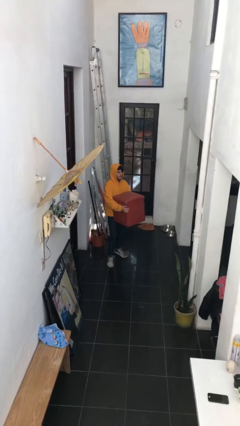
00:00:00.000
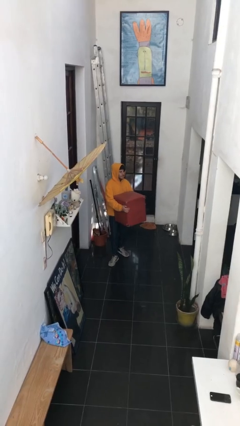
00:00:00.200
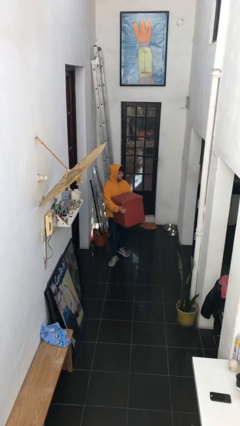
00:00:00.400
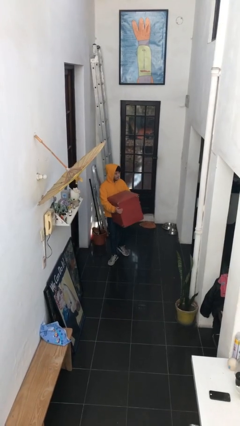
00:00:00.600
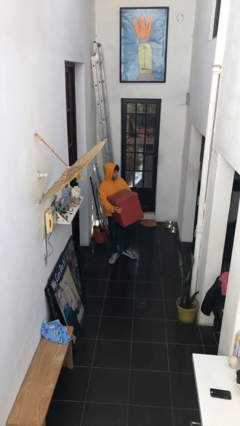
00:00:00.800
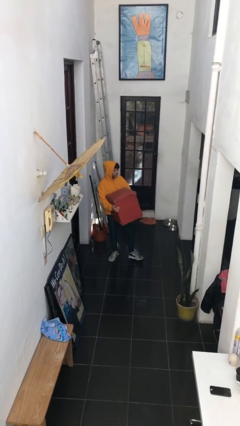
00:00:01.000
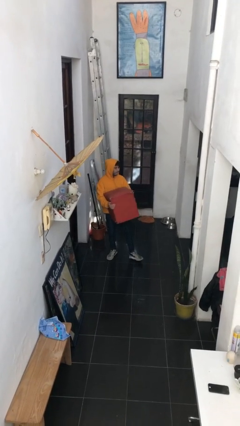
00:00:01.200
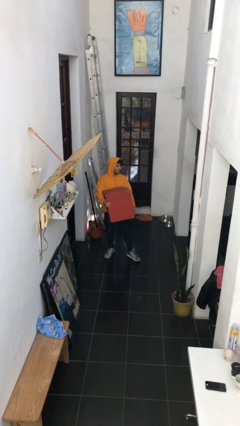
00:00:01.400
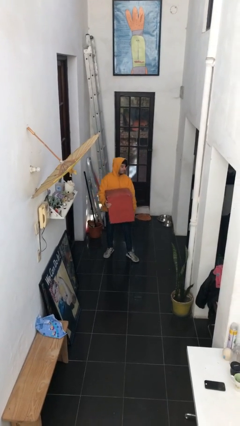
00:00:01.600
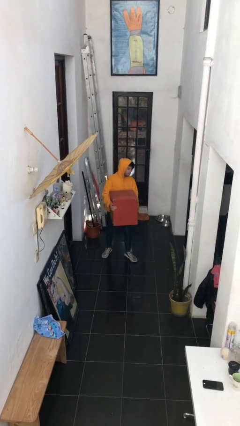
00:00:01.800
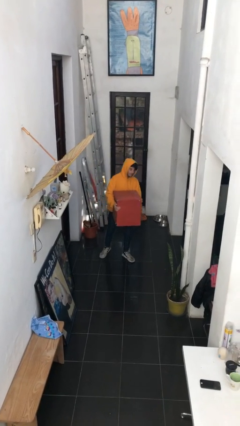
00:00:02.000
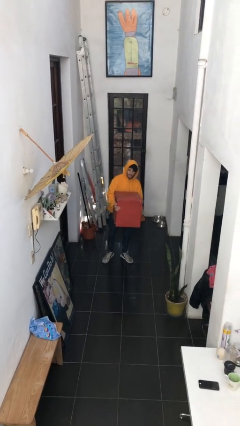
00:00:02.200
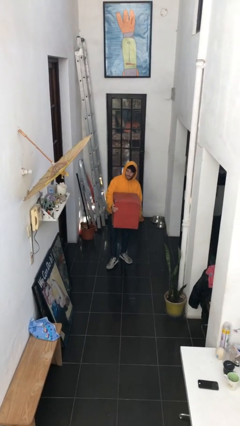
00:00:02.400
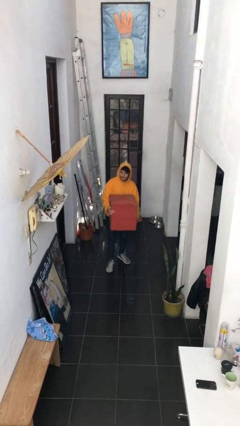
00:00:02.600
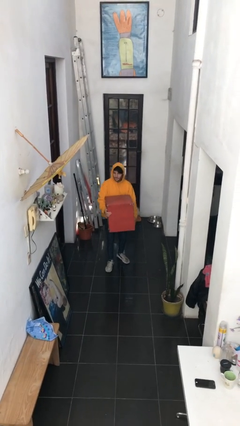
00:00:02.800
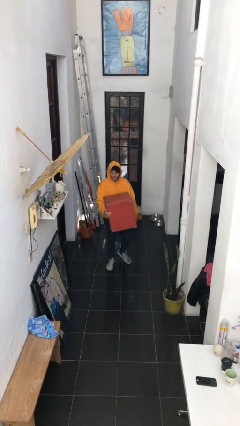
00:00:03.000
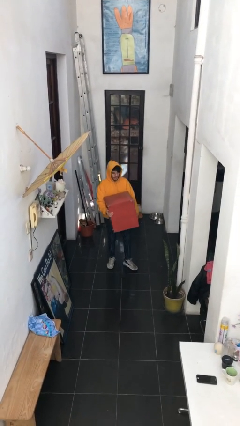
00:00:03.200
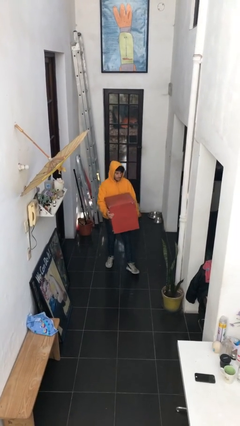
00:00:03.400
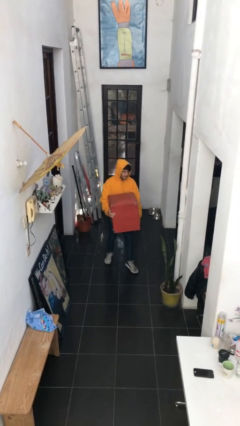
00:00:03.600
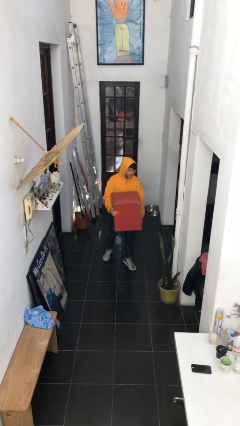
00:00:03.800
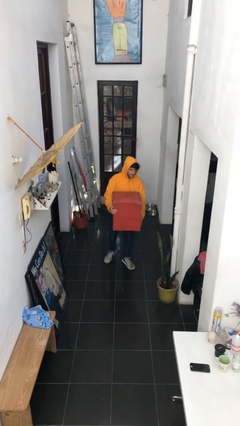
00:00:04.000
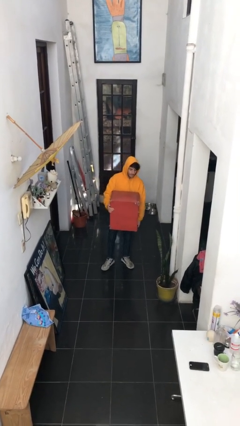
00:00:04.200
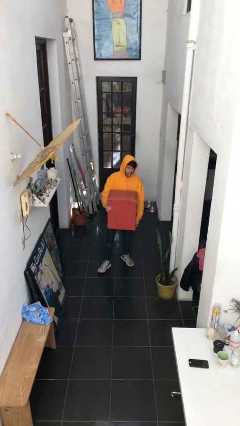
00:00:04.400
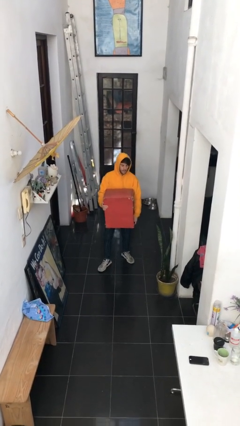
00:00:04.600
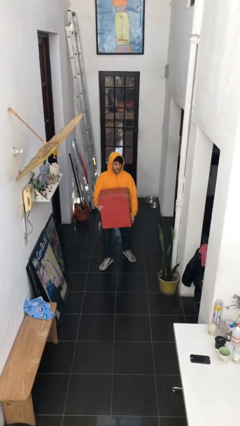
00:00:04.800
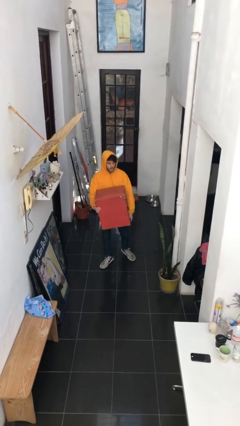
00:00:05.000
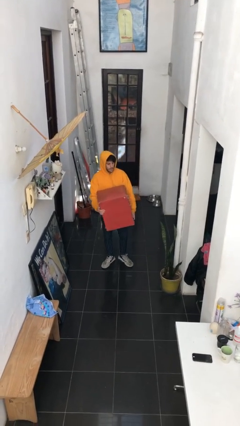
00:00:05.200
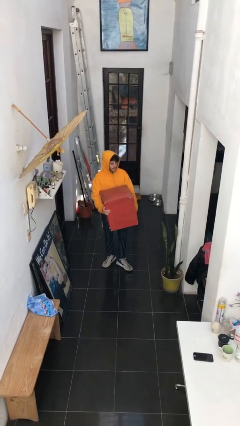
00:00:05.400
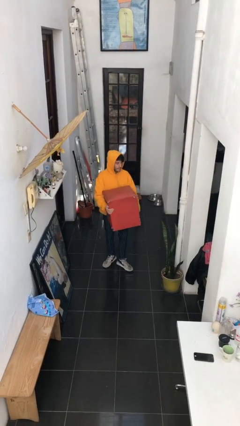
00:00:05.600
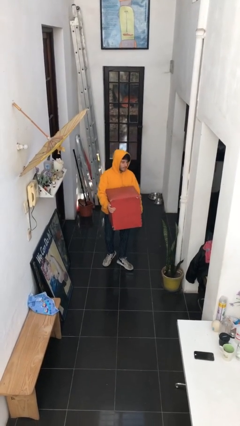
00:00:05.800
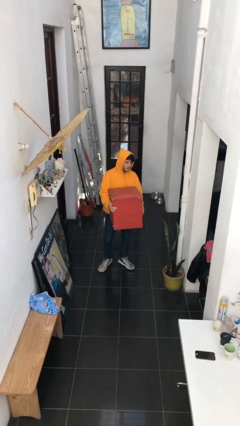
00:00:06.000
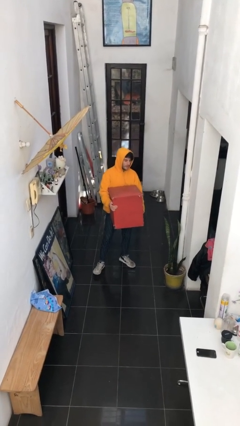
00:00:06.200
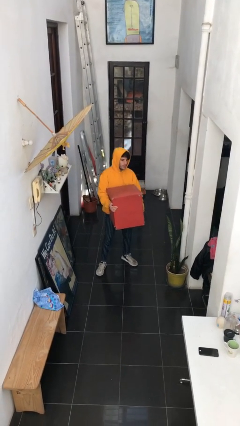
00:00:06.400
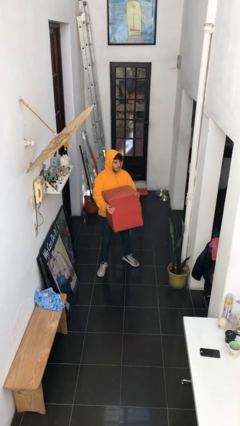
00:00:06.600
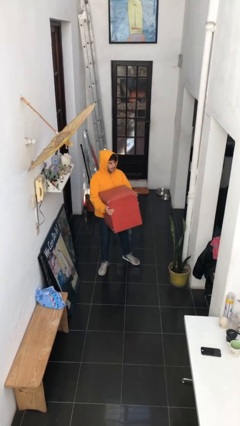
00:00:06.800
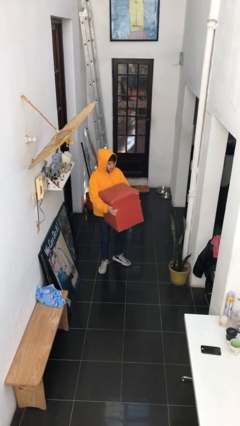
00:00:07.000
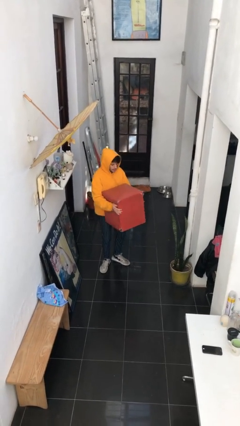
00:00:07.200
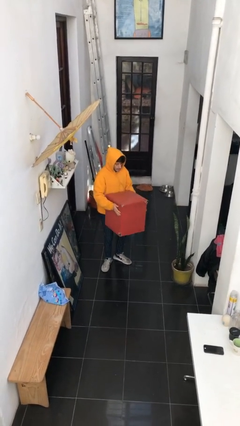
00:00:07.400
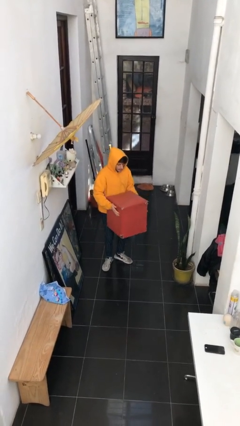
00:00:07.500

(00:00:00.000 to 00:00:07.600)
person carries heavy object

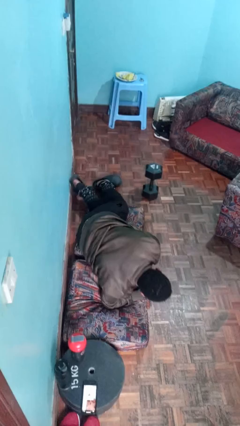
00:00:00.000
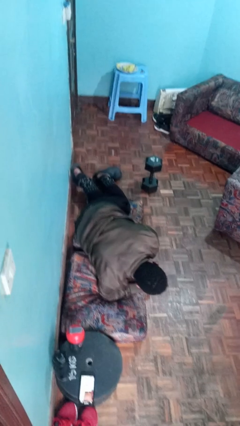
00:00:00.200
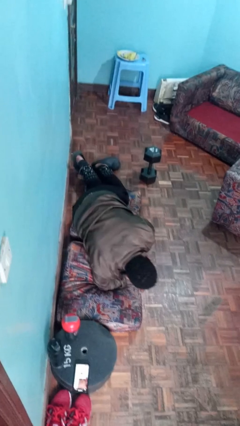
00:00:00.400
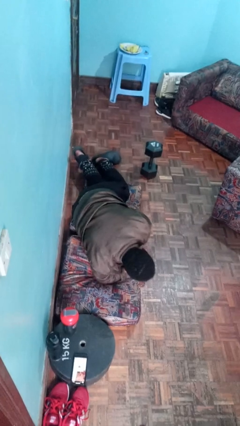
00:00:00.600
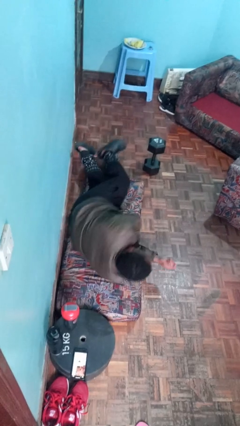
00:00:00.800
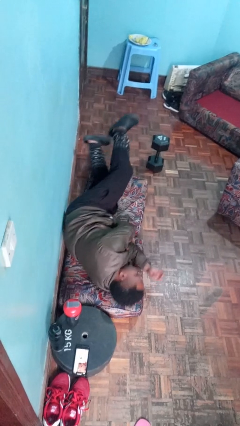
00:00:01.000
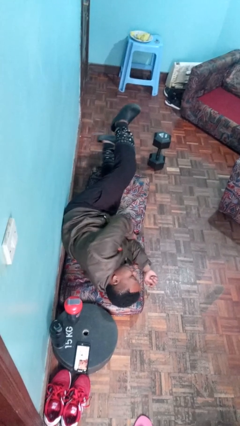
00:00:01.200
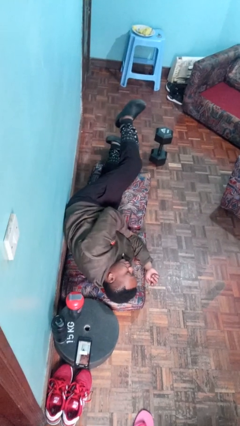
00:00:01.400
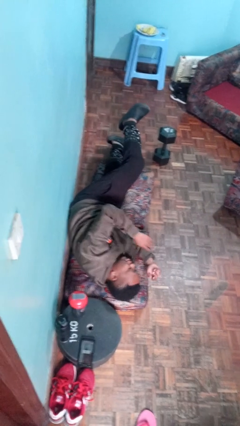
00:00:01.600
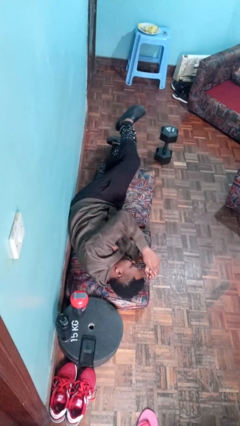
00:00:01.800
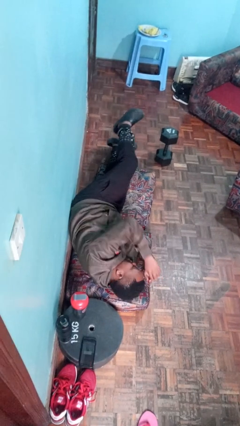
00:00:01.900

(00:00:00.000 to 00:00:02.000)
person lies down on floor

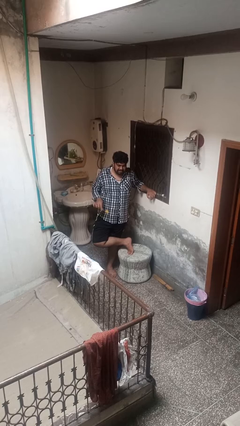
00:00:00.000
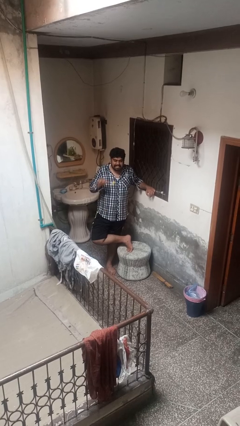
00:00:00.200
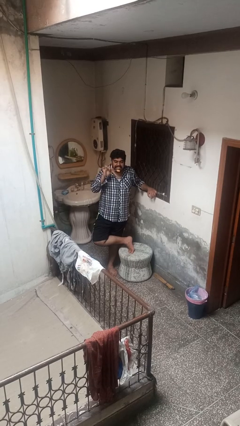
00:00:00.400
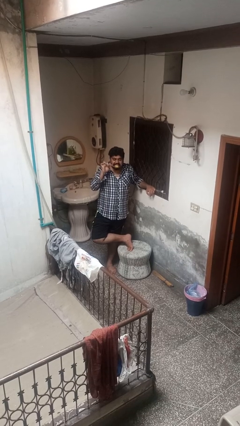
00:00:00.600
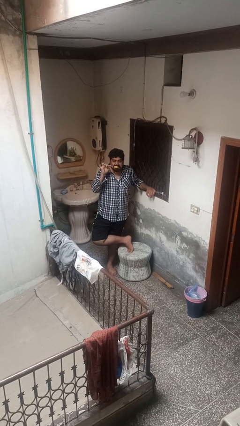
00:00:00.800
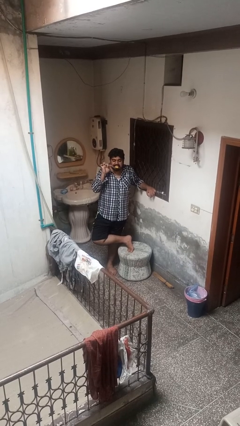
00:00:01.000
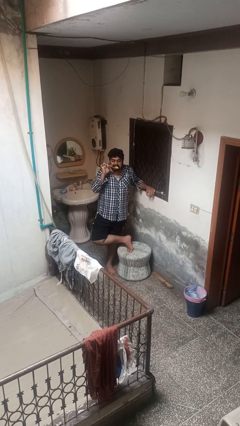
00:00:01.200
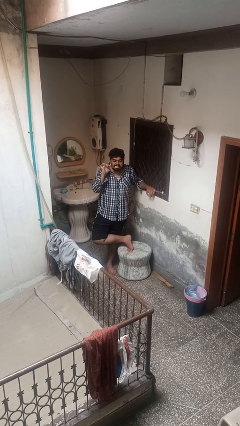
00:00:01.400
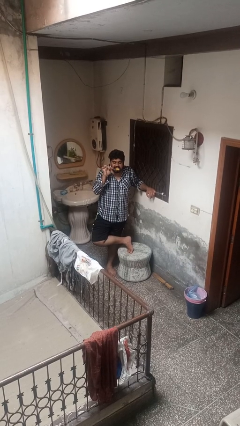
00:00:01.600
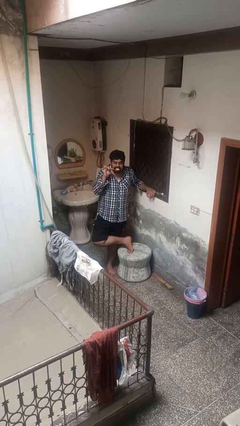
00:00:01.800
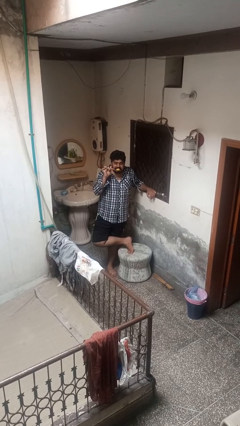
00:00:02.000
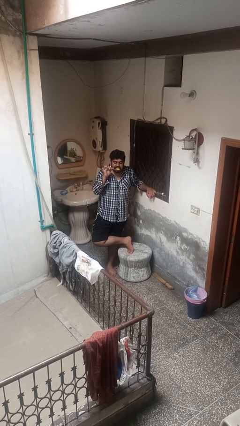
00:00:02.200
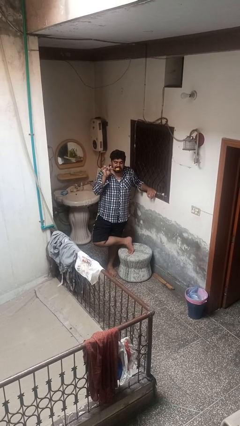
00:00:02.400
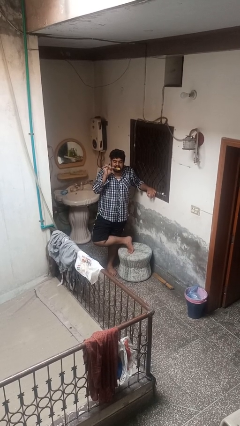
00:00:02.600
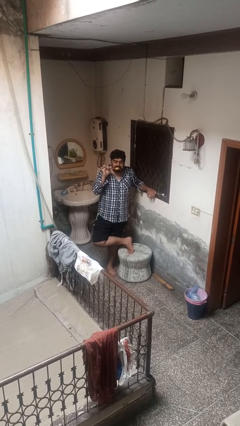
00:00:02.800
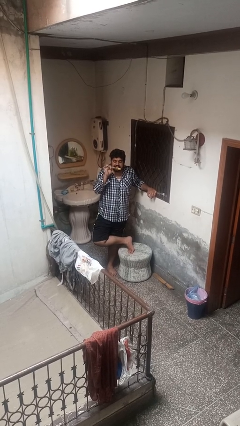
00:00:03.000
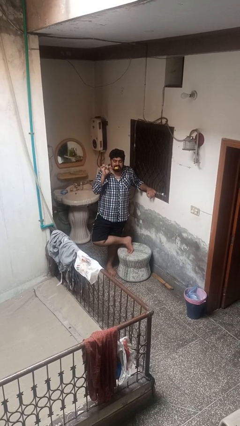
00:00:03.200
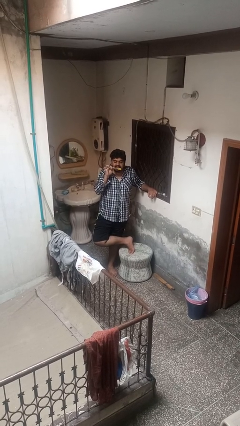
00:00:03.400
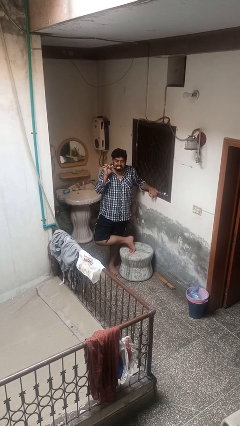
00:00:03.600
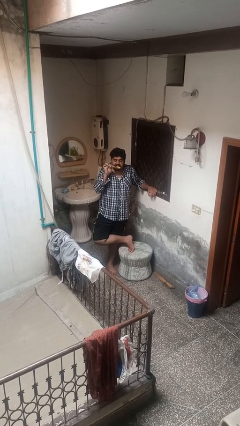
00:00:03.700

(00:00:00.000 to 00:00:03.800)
person brushes teeth

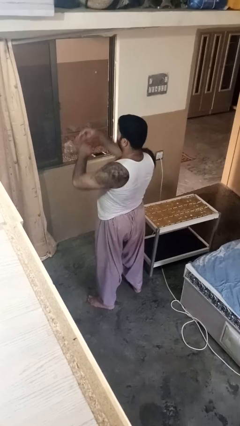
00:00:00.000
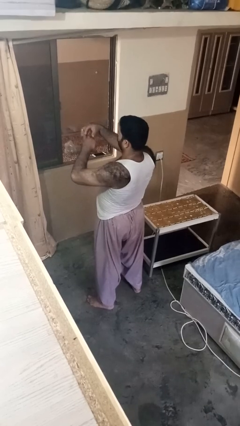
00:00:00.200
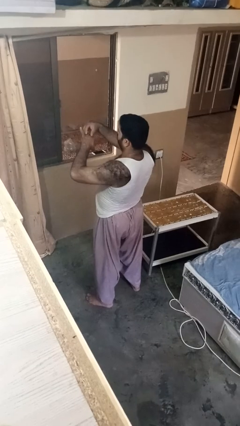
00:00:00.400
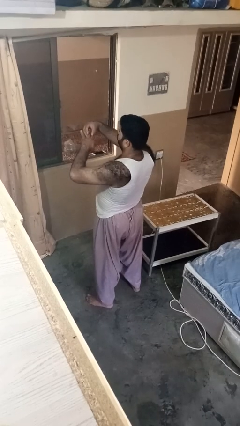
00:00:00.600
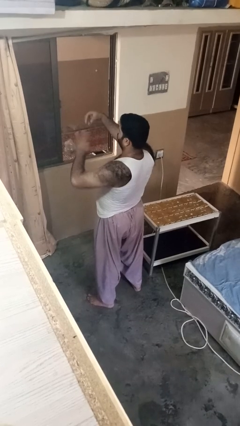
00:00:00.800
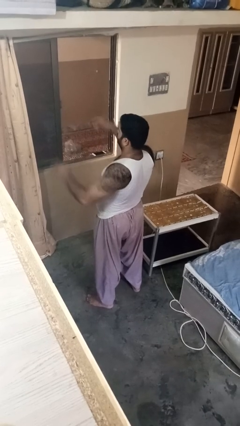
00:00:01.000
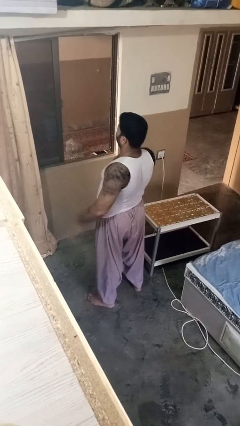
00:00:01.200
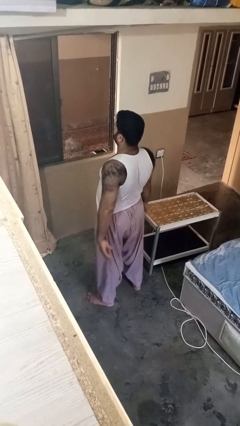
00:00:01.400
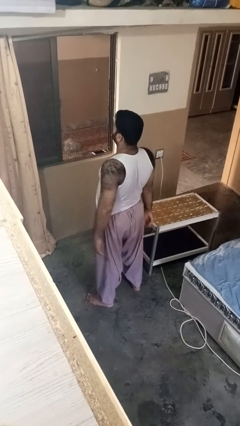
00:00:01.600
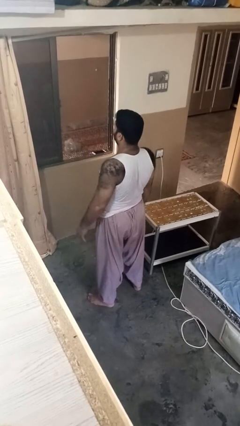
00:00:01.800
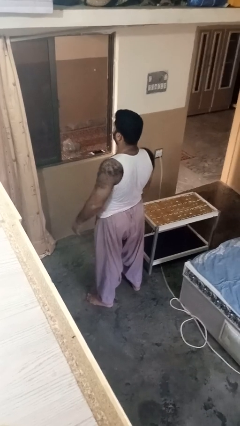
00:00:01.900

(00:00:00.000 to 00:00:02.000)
person takes off ring

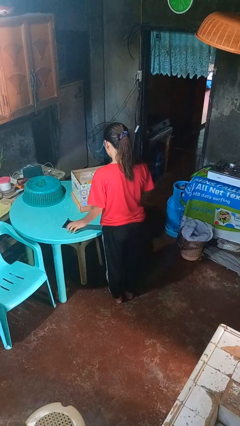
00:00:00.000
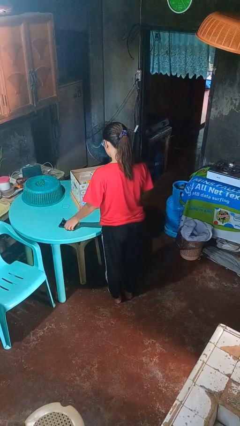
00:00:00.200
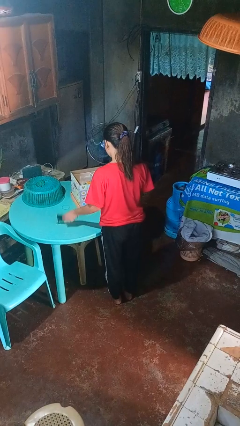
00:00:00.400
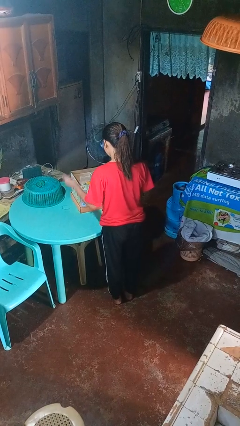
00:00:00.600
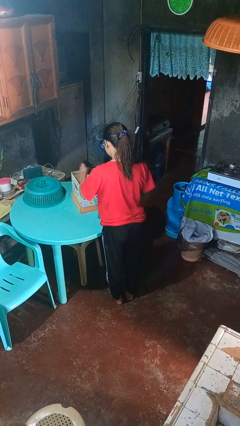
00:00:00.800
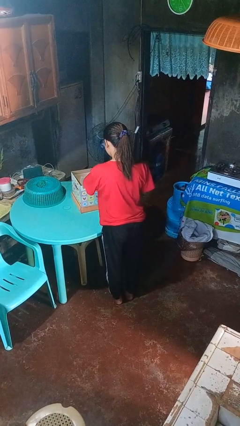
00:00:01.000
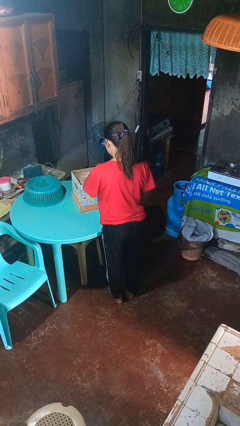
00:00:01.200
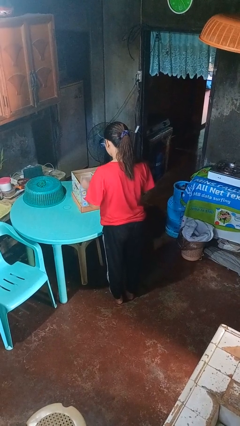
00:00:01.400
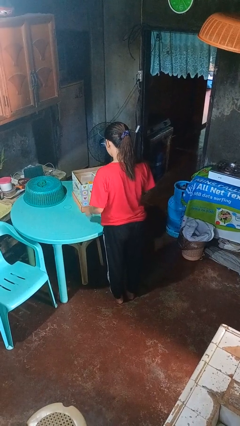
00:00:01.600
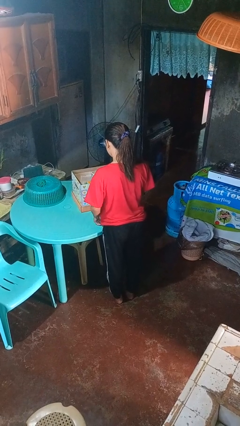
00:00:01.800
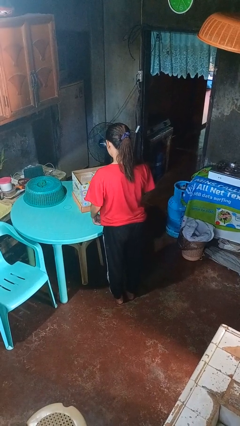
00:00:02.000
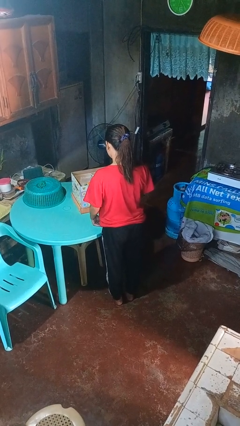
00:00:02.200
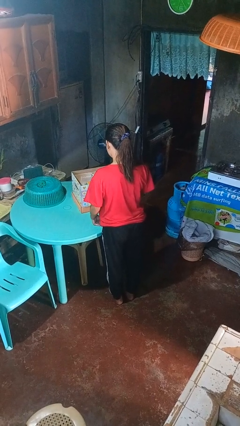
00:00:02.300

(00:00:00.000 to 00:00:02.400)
person puts object into box
